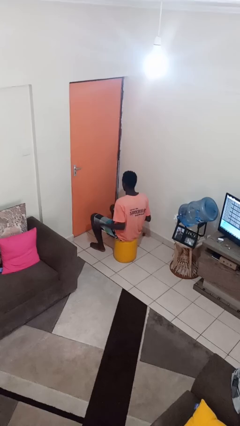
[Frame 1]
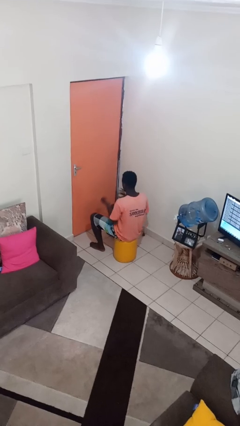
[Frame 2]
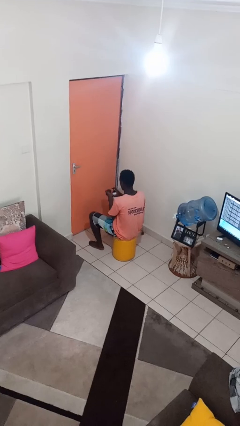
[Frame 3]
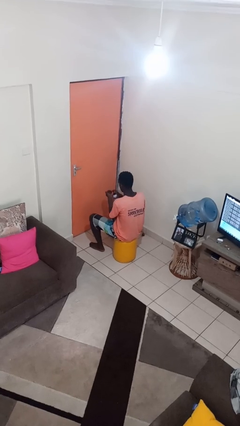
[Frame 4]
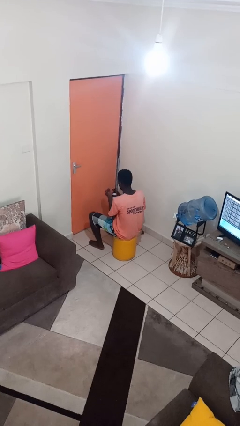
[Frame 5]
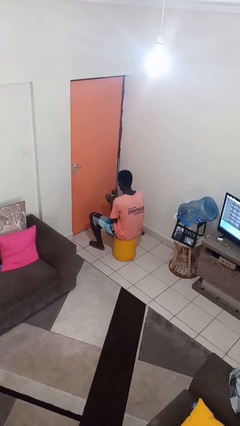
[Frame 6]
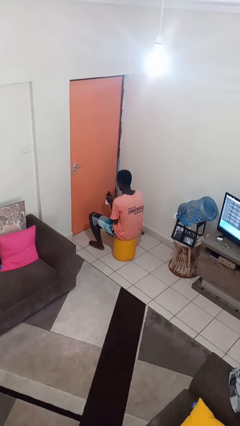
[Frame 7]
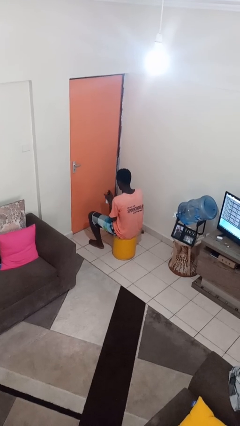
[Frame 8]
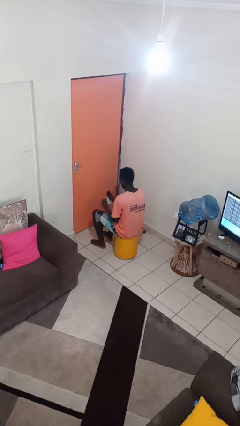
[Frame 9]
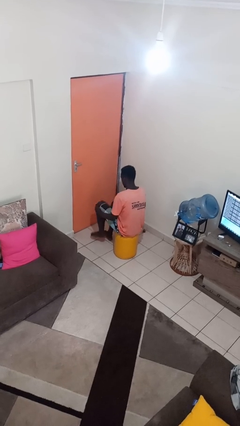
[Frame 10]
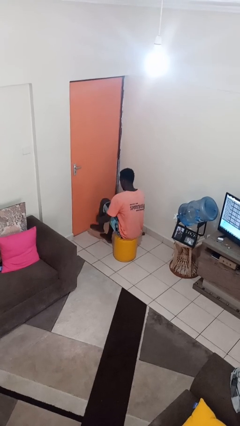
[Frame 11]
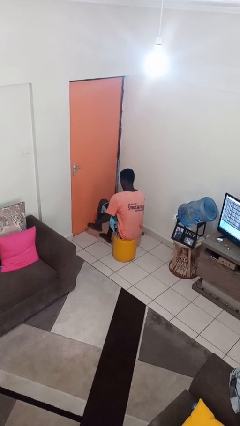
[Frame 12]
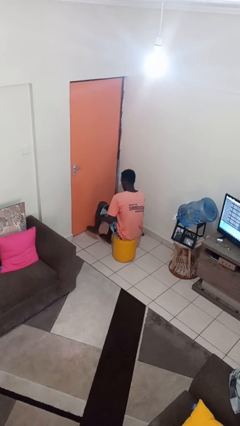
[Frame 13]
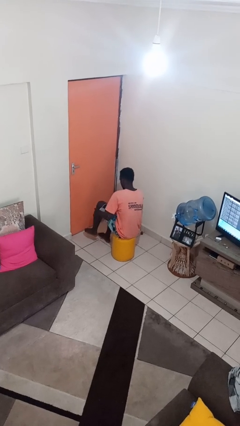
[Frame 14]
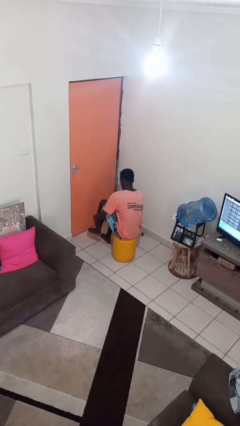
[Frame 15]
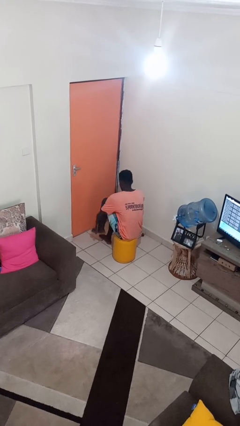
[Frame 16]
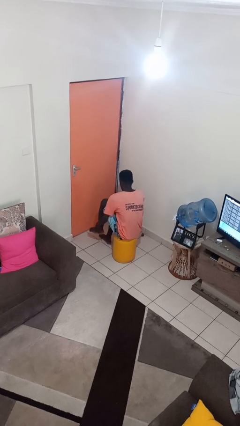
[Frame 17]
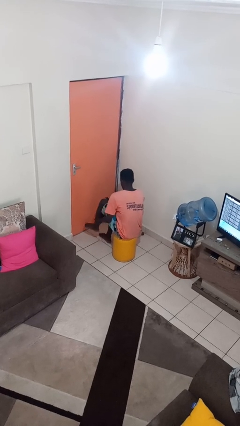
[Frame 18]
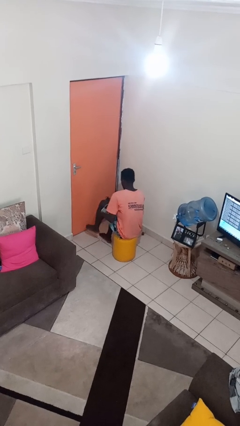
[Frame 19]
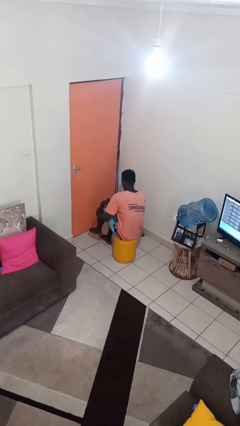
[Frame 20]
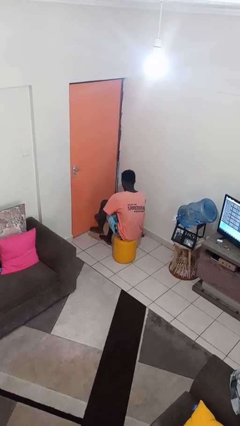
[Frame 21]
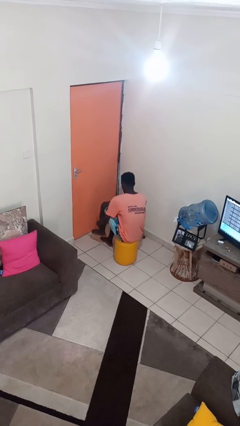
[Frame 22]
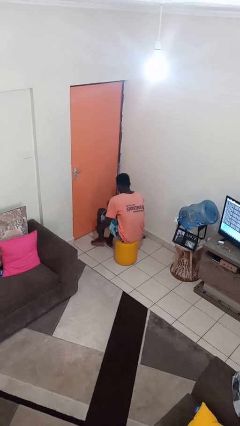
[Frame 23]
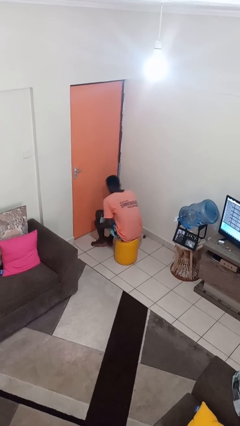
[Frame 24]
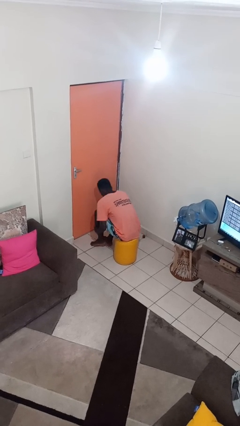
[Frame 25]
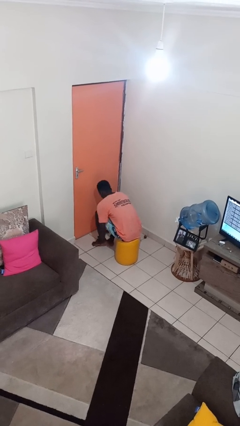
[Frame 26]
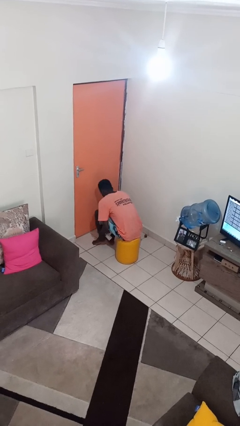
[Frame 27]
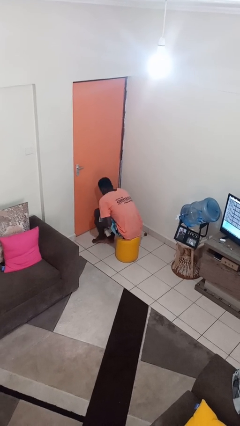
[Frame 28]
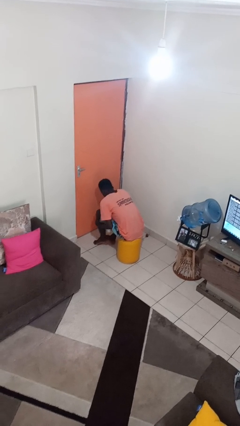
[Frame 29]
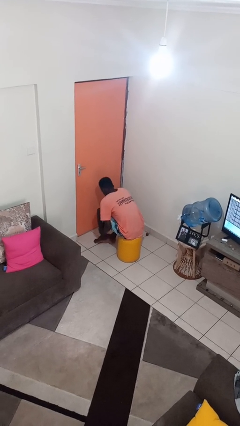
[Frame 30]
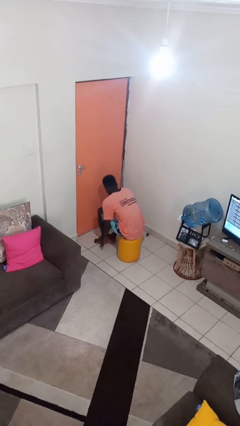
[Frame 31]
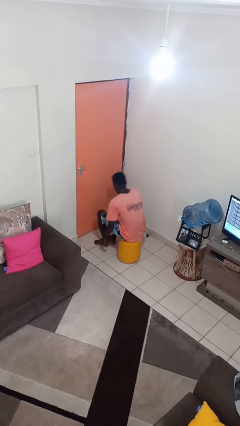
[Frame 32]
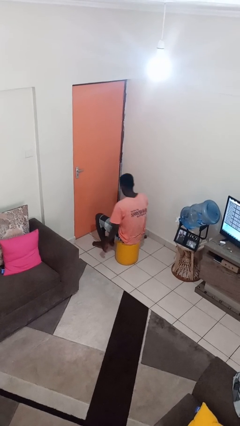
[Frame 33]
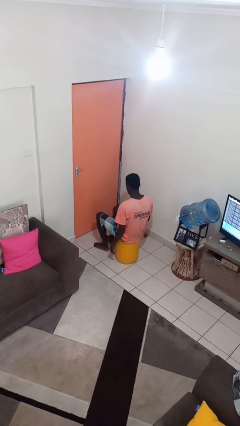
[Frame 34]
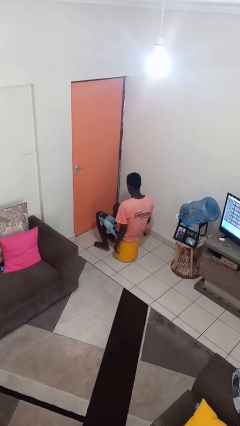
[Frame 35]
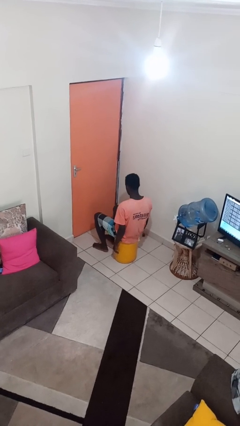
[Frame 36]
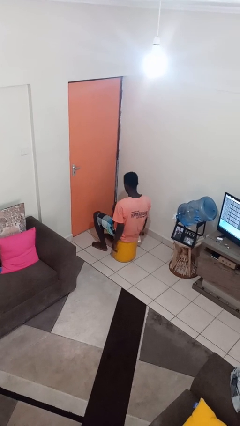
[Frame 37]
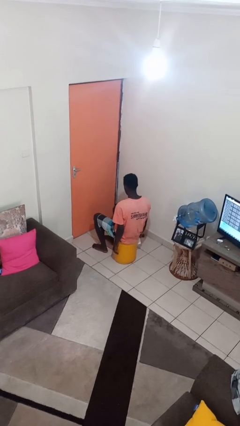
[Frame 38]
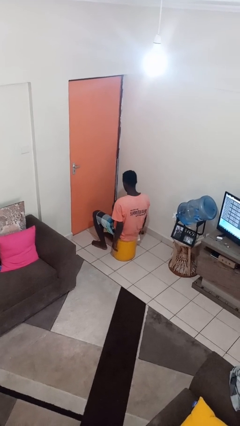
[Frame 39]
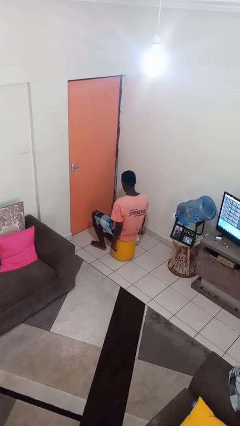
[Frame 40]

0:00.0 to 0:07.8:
person applies sunscreen

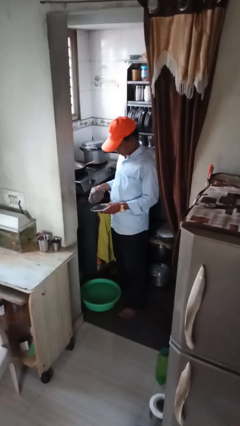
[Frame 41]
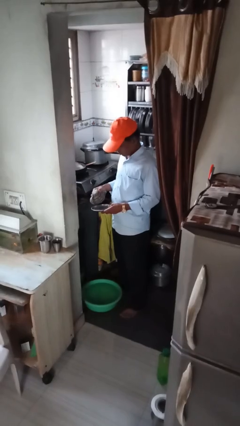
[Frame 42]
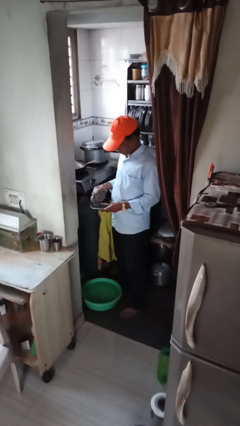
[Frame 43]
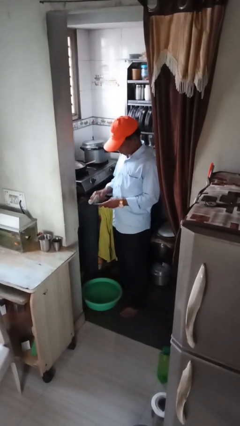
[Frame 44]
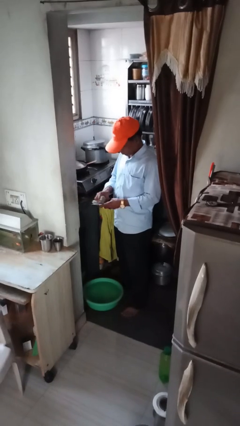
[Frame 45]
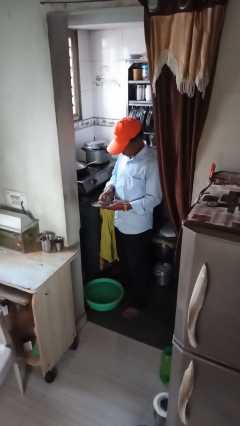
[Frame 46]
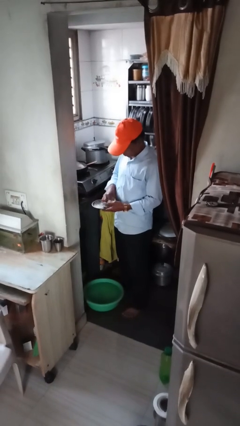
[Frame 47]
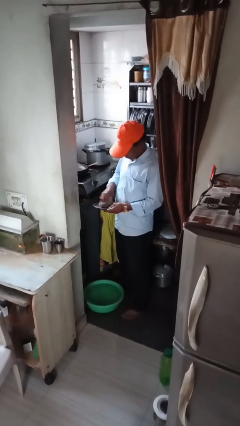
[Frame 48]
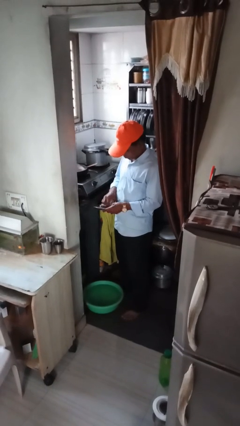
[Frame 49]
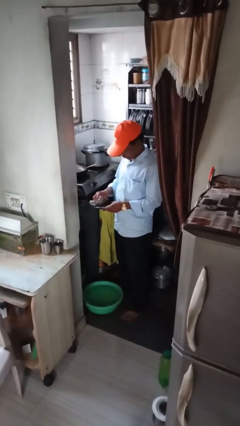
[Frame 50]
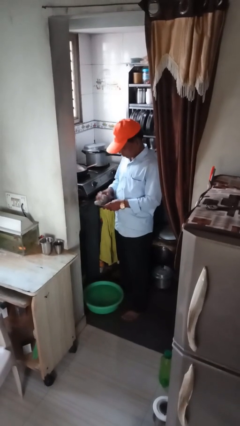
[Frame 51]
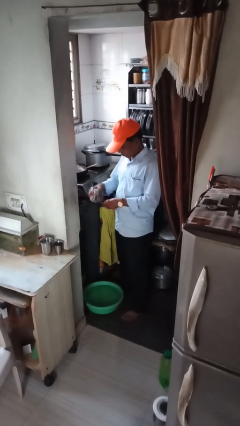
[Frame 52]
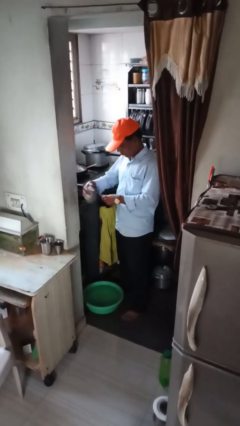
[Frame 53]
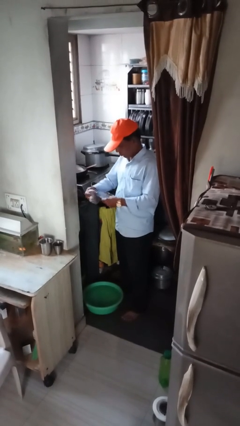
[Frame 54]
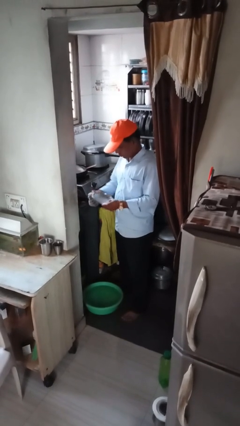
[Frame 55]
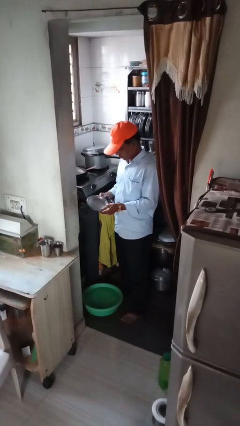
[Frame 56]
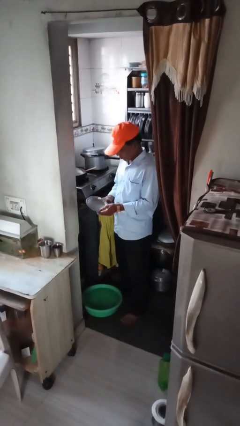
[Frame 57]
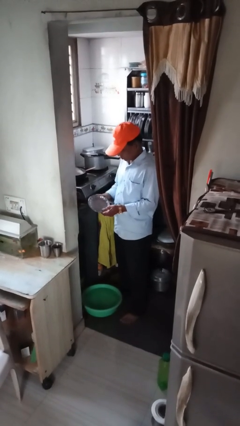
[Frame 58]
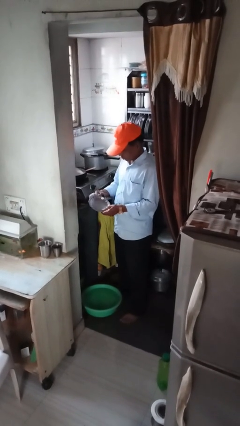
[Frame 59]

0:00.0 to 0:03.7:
person dries dish

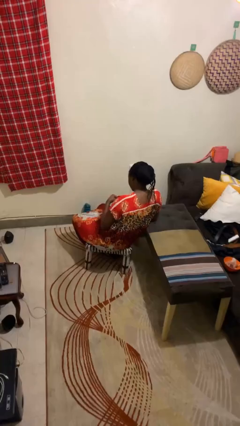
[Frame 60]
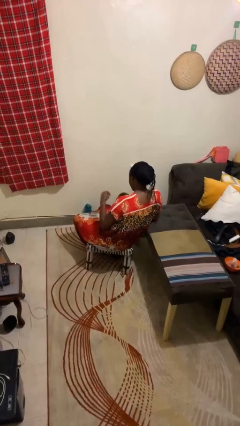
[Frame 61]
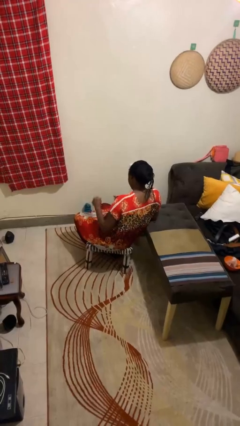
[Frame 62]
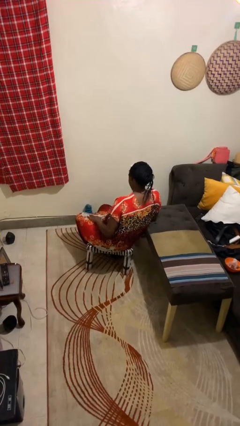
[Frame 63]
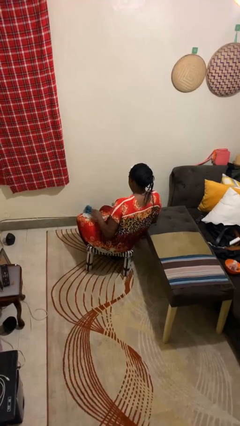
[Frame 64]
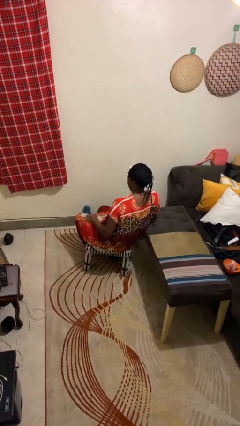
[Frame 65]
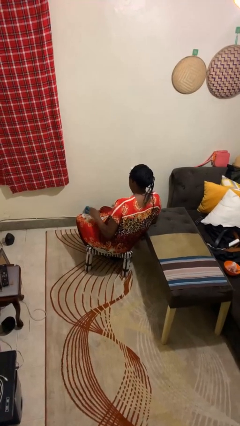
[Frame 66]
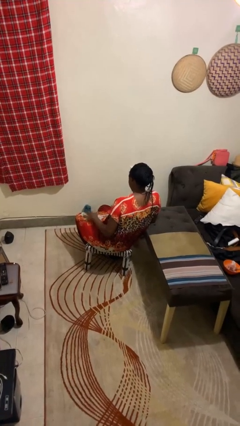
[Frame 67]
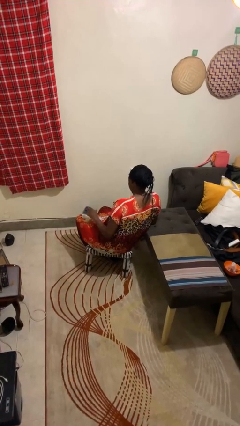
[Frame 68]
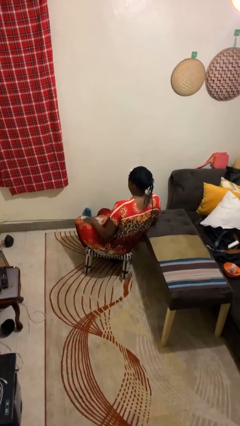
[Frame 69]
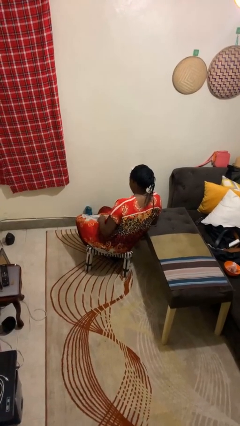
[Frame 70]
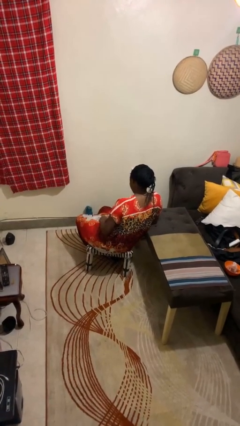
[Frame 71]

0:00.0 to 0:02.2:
person slaps hands on thighs

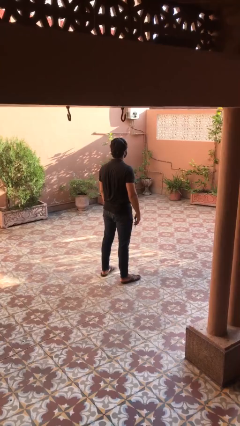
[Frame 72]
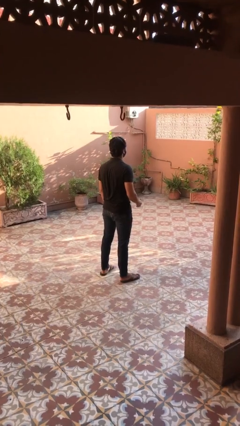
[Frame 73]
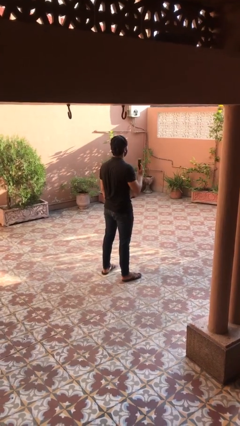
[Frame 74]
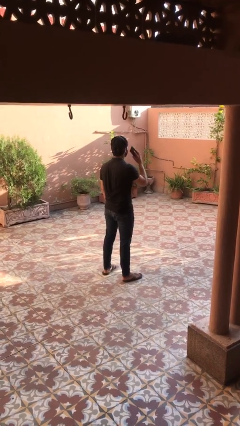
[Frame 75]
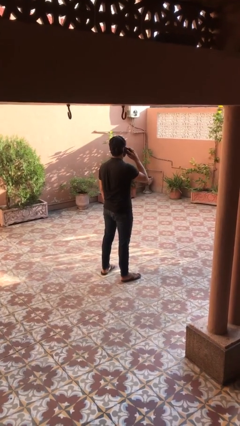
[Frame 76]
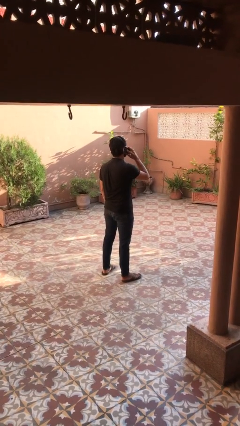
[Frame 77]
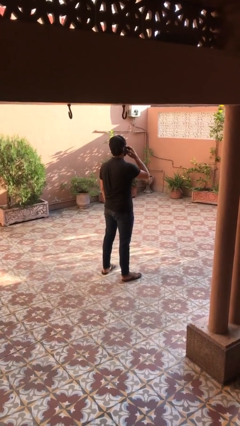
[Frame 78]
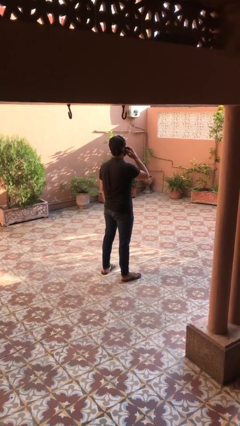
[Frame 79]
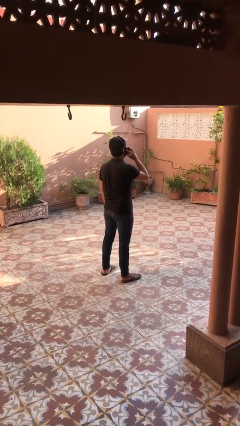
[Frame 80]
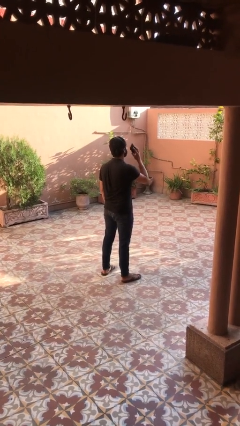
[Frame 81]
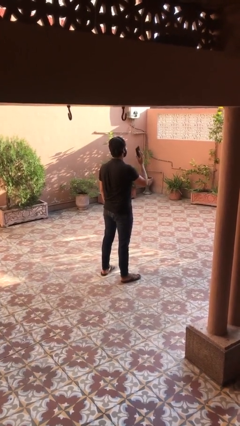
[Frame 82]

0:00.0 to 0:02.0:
person gestures call me

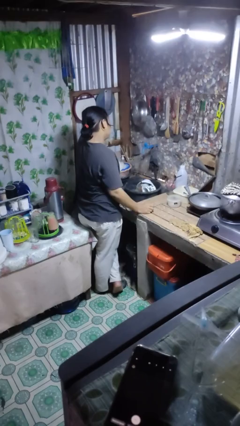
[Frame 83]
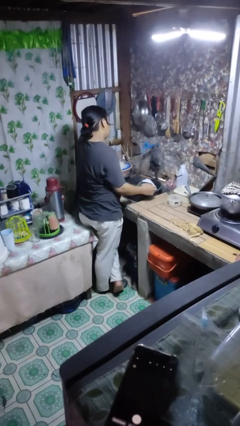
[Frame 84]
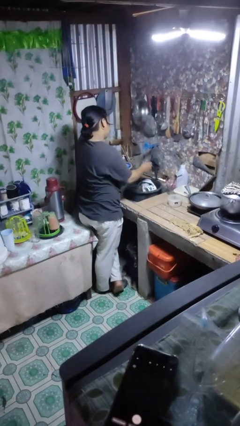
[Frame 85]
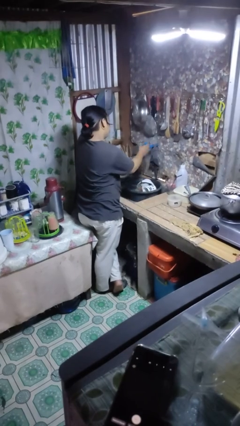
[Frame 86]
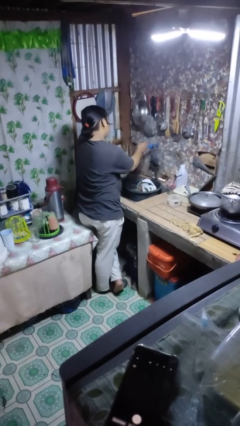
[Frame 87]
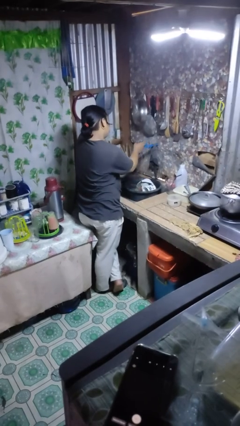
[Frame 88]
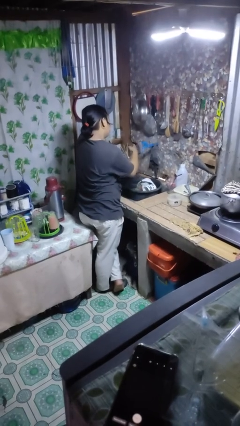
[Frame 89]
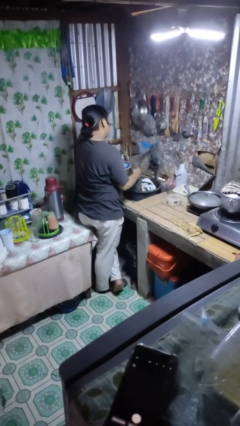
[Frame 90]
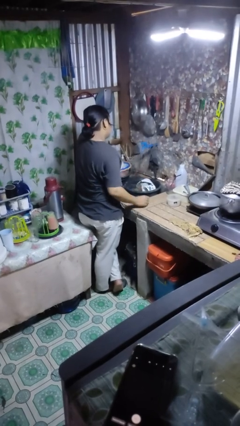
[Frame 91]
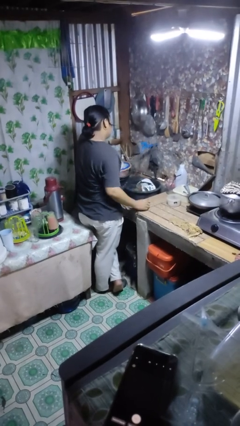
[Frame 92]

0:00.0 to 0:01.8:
person turns off faucet
